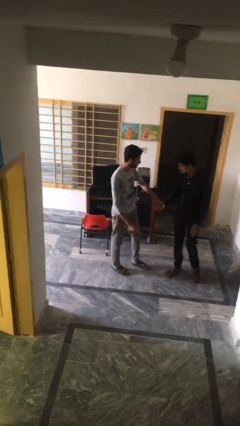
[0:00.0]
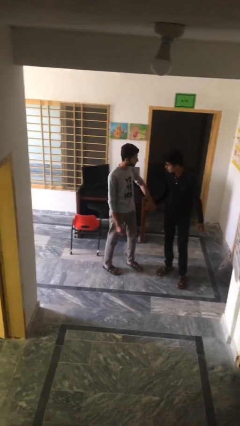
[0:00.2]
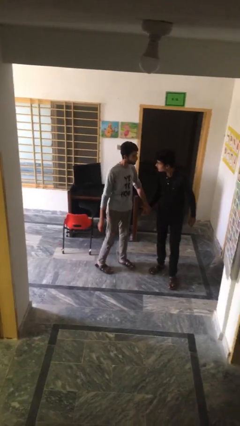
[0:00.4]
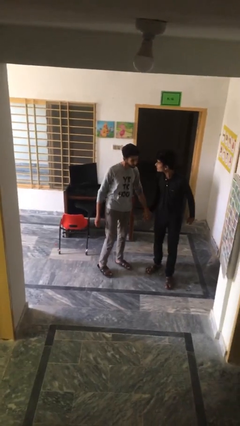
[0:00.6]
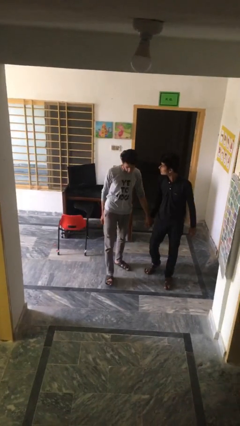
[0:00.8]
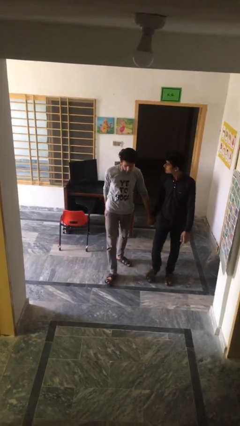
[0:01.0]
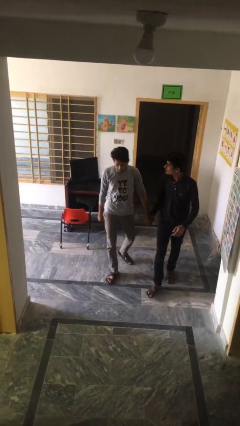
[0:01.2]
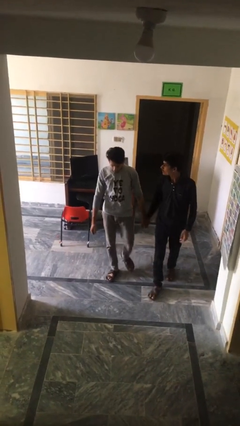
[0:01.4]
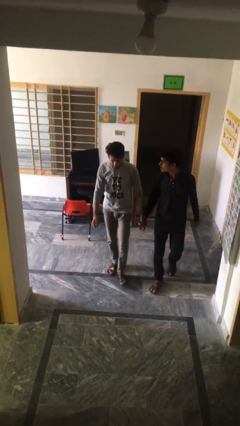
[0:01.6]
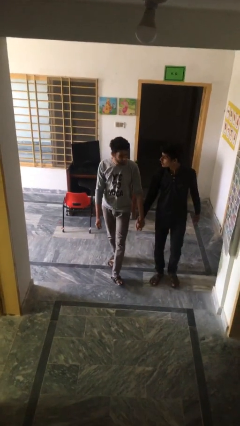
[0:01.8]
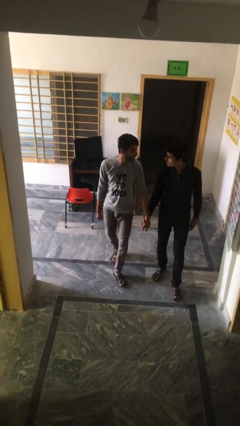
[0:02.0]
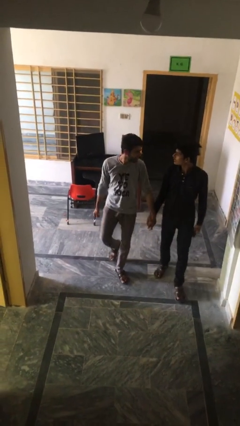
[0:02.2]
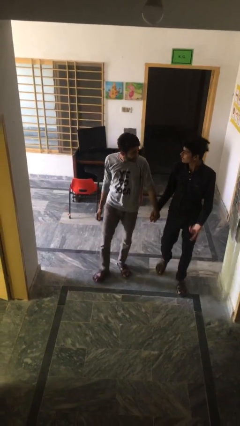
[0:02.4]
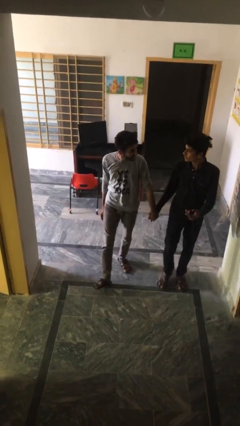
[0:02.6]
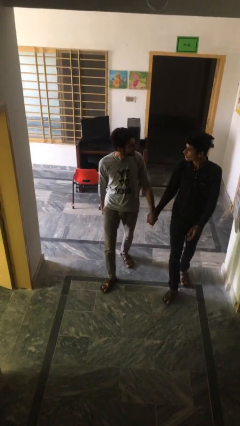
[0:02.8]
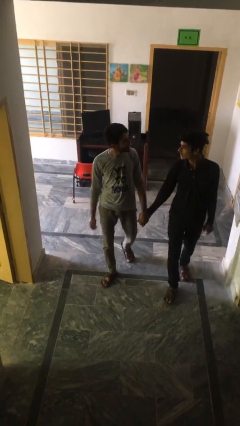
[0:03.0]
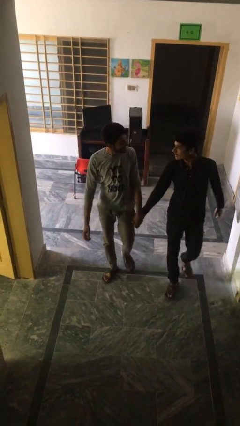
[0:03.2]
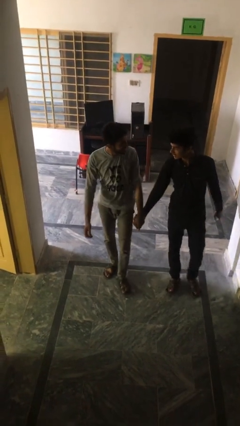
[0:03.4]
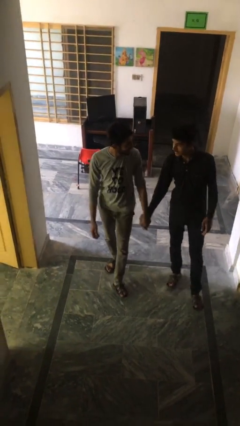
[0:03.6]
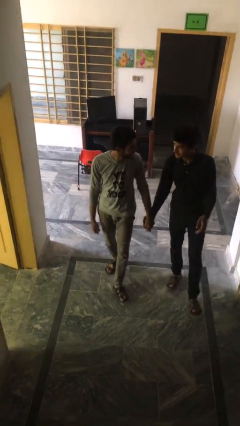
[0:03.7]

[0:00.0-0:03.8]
person holds hand

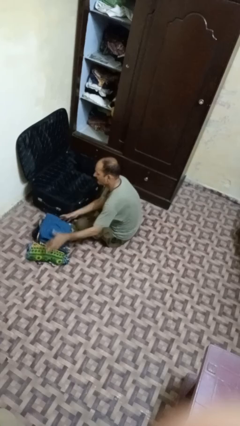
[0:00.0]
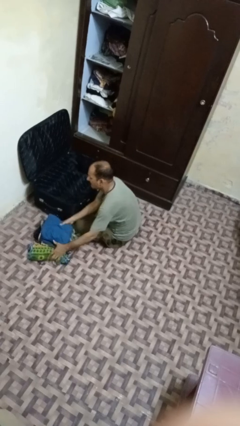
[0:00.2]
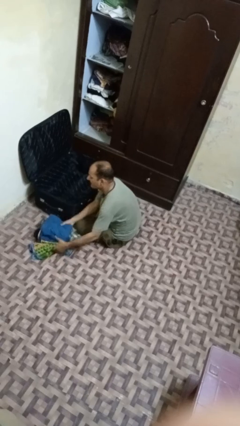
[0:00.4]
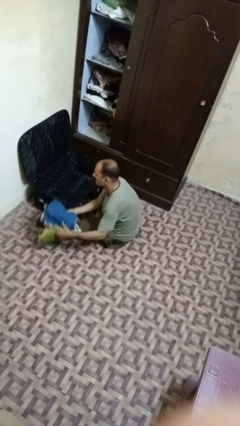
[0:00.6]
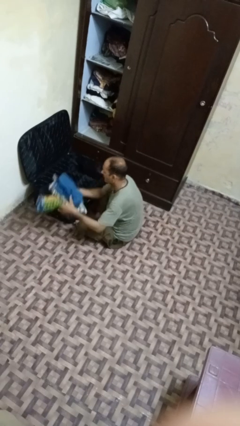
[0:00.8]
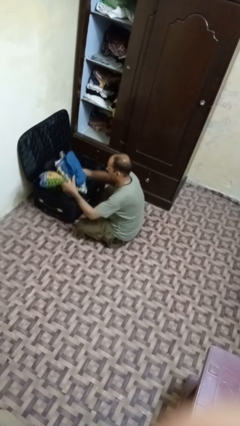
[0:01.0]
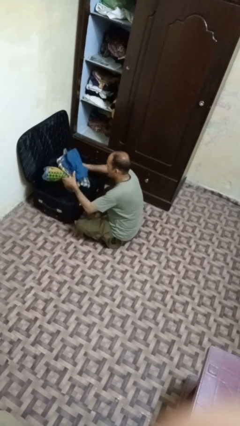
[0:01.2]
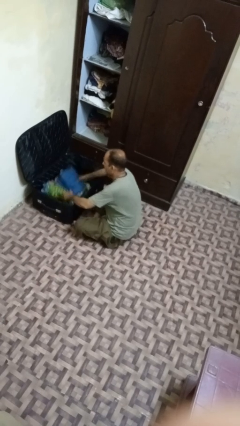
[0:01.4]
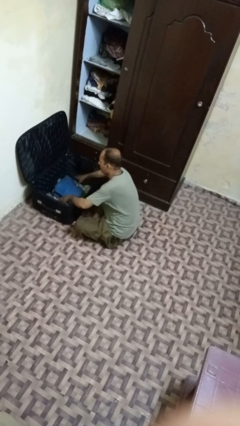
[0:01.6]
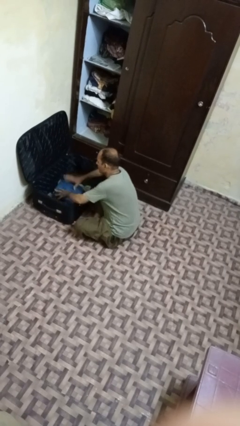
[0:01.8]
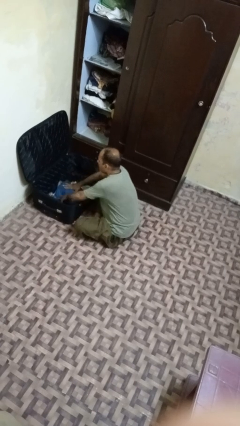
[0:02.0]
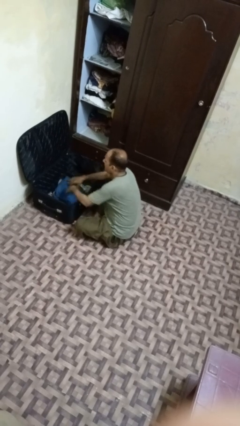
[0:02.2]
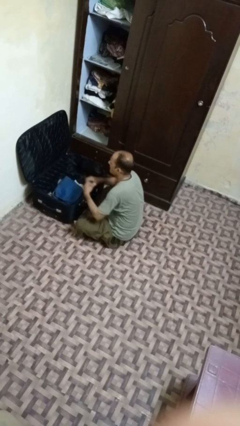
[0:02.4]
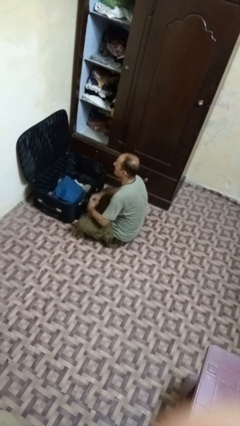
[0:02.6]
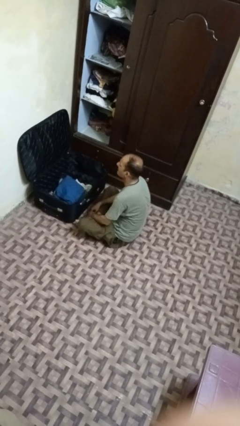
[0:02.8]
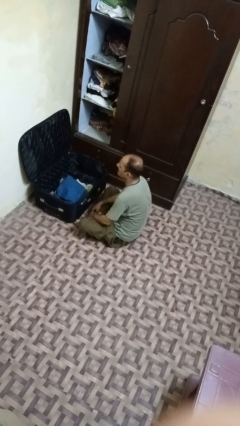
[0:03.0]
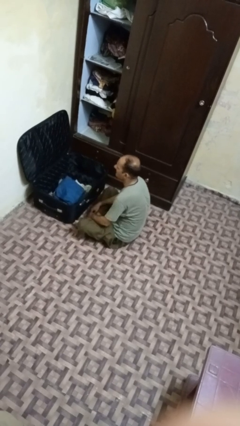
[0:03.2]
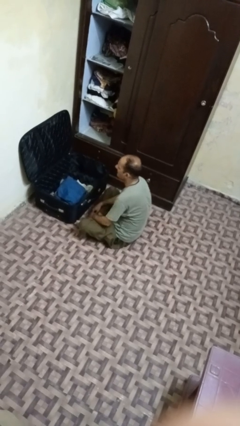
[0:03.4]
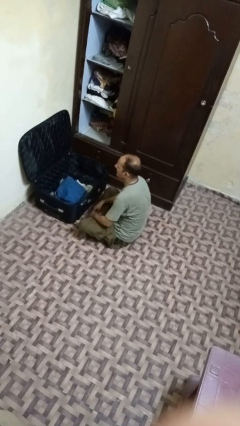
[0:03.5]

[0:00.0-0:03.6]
person loads clothes into suitcase

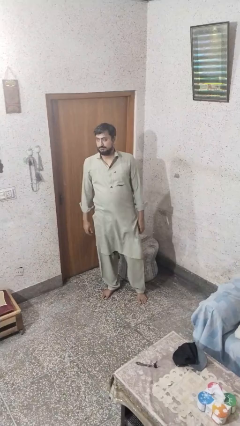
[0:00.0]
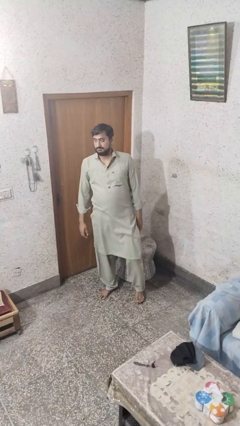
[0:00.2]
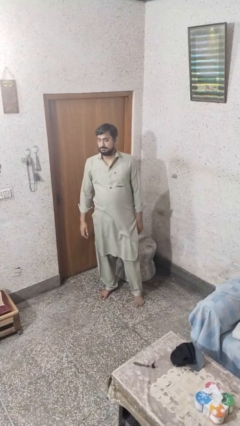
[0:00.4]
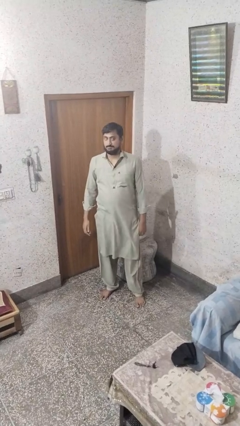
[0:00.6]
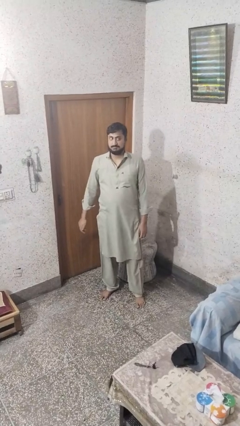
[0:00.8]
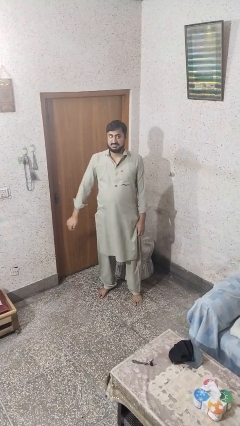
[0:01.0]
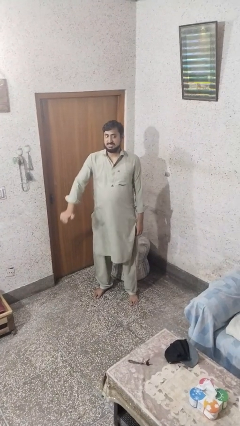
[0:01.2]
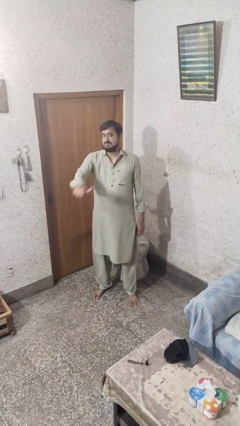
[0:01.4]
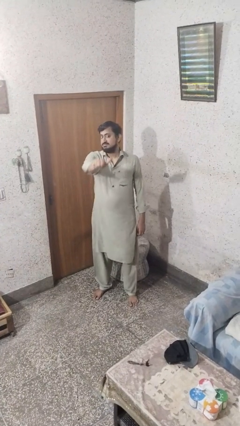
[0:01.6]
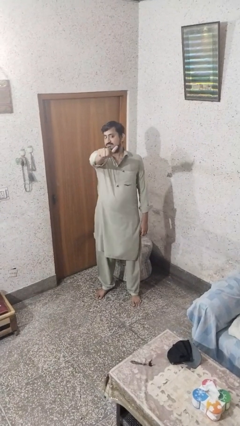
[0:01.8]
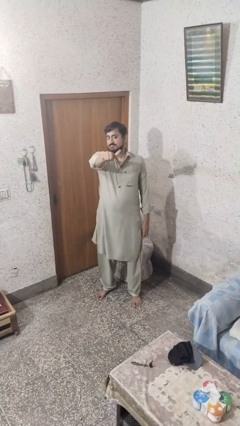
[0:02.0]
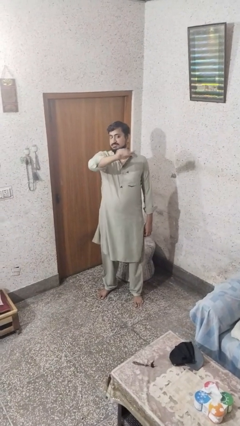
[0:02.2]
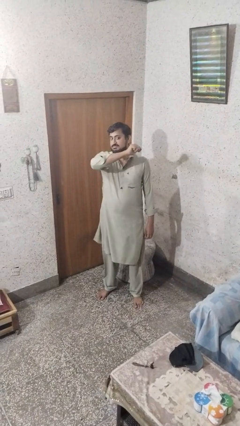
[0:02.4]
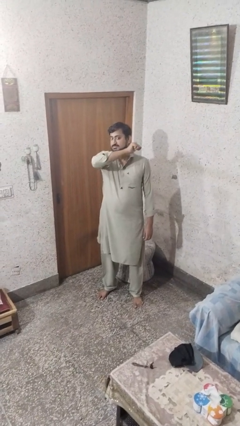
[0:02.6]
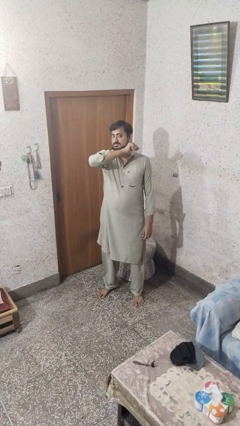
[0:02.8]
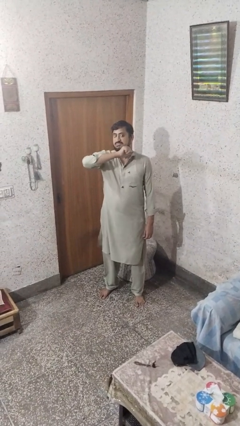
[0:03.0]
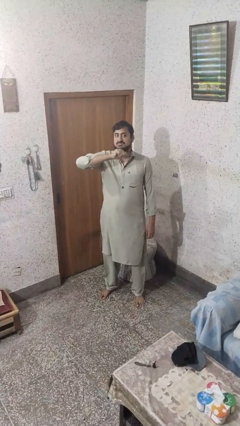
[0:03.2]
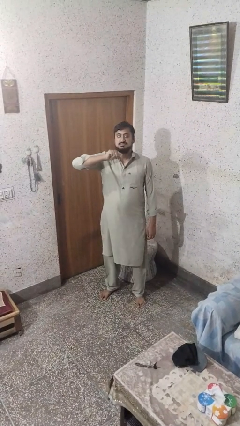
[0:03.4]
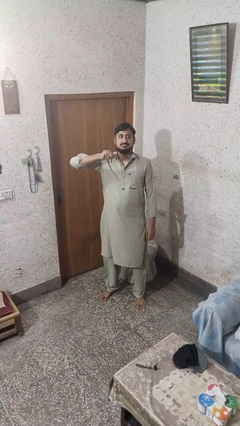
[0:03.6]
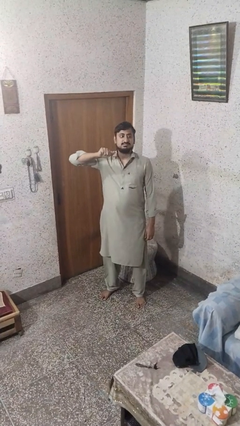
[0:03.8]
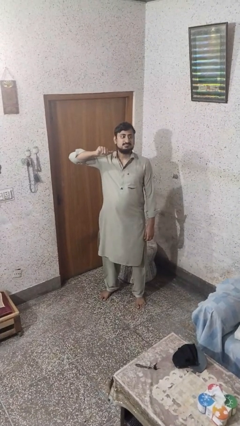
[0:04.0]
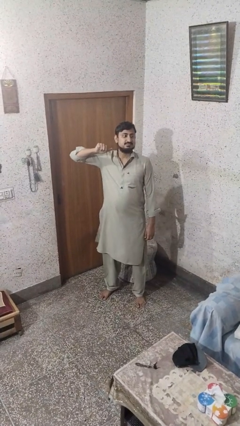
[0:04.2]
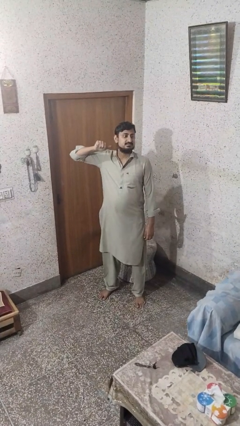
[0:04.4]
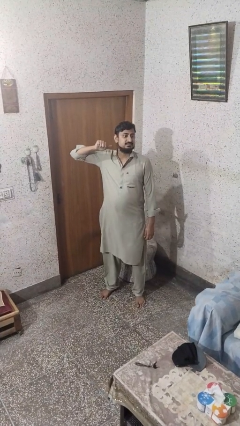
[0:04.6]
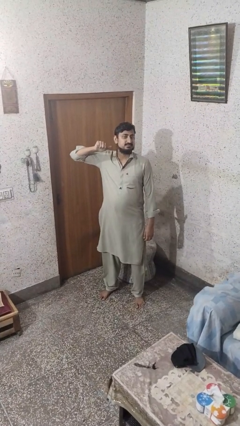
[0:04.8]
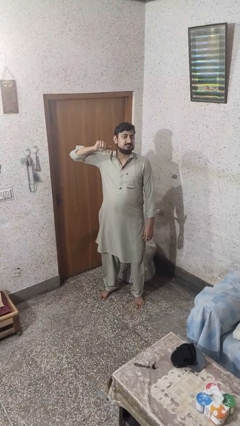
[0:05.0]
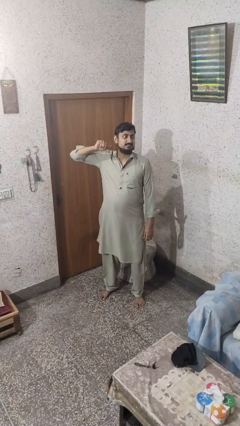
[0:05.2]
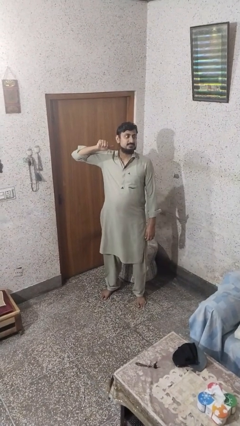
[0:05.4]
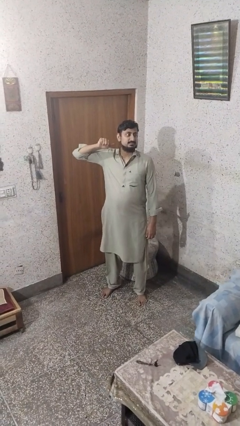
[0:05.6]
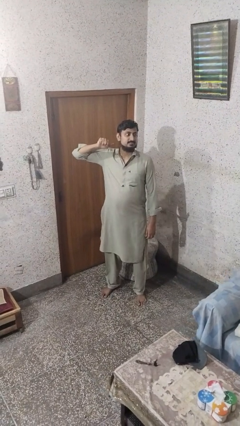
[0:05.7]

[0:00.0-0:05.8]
person gestures cut

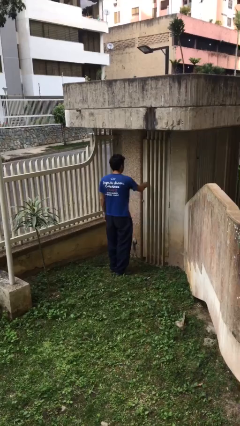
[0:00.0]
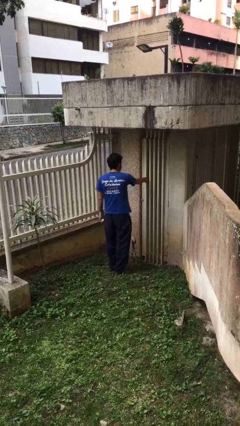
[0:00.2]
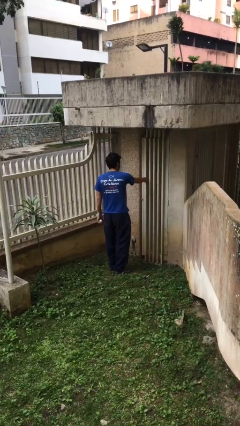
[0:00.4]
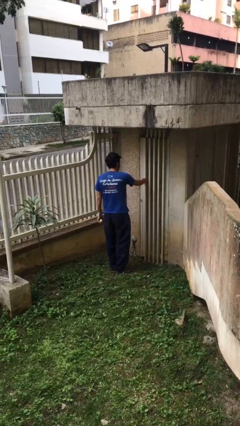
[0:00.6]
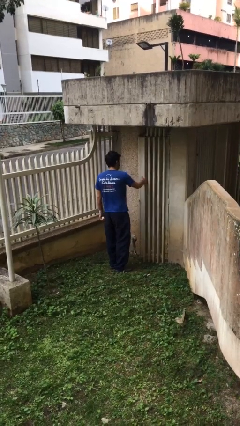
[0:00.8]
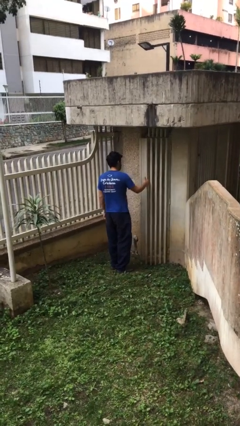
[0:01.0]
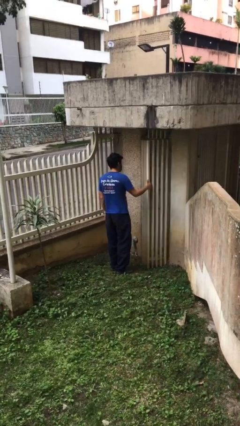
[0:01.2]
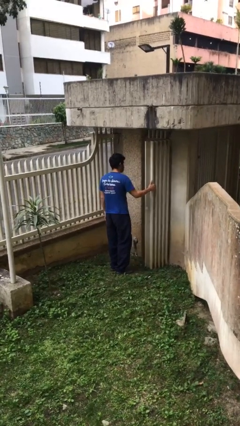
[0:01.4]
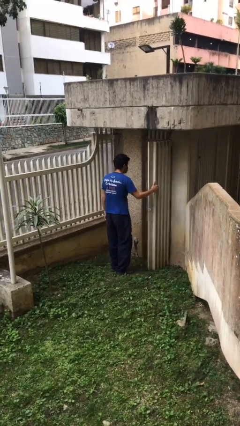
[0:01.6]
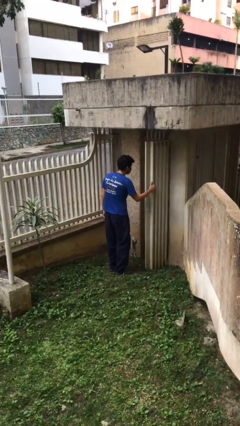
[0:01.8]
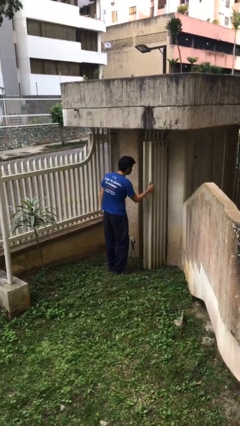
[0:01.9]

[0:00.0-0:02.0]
person opens facility door

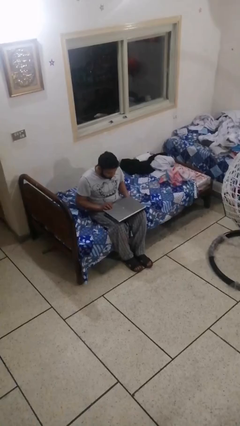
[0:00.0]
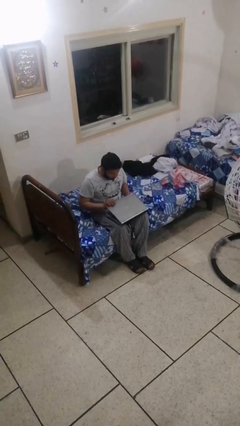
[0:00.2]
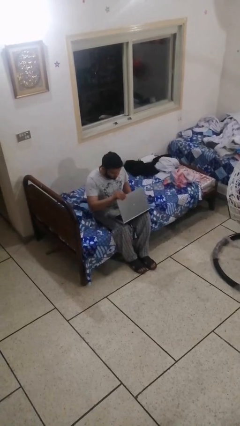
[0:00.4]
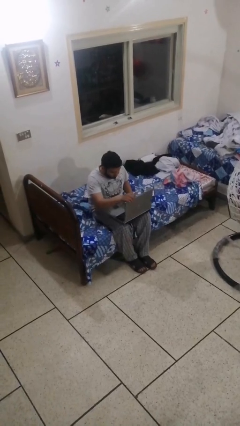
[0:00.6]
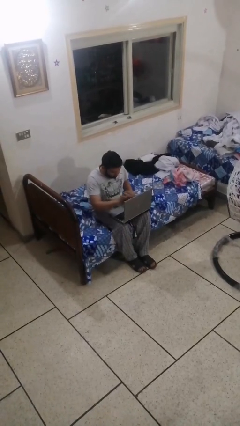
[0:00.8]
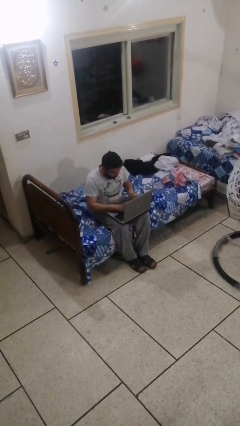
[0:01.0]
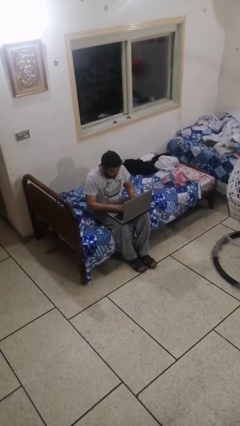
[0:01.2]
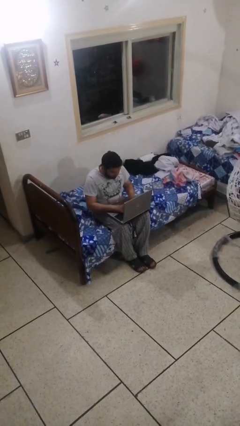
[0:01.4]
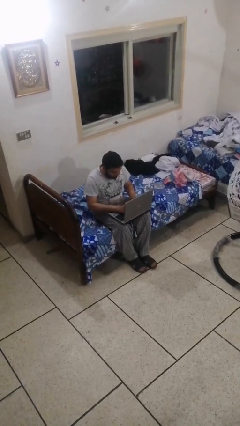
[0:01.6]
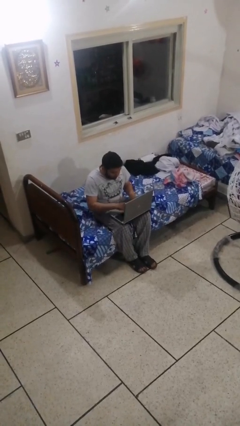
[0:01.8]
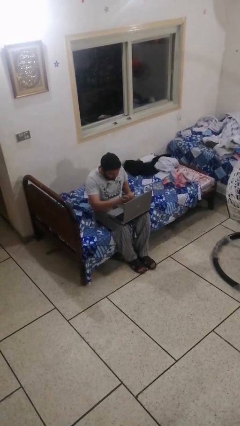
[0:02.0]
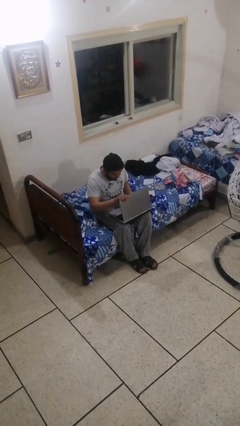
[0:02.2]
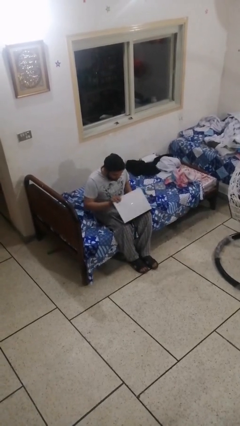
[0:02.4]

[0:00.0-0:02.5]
person interacts with laptop
